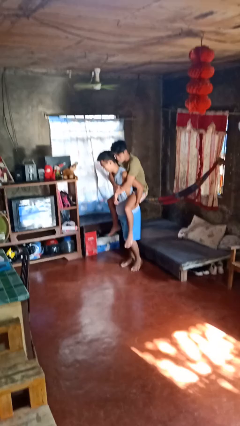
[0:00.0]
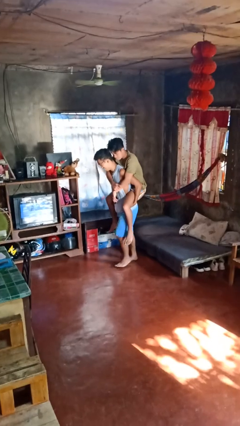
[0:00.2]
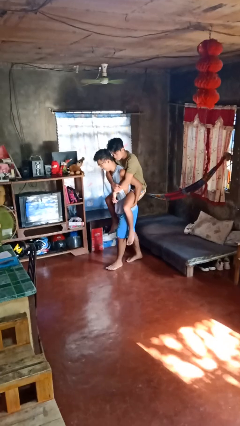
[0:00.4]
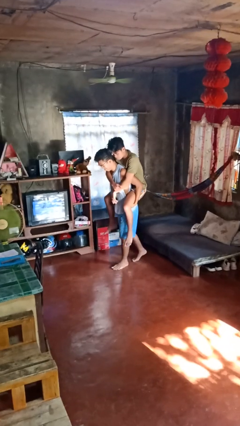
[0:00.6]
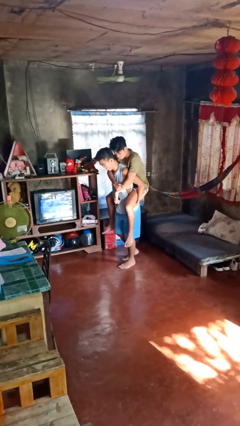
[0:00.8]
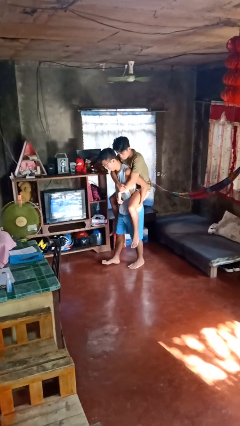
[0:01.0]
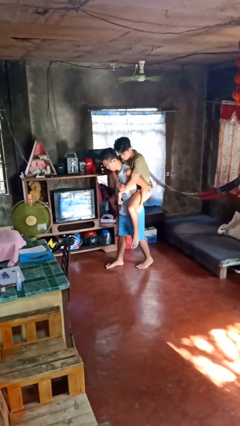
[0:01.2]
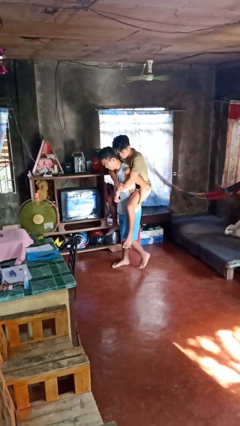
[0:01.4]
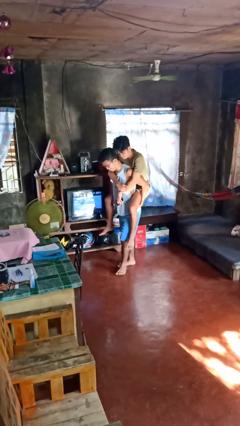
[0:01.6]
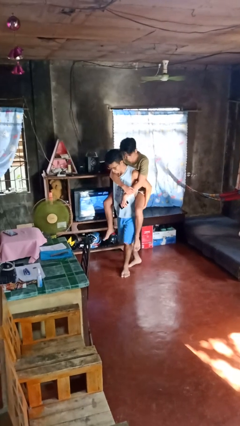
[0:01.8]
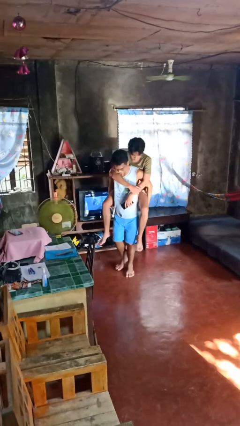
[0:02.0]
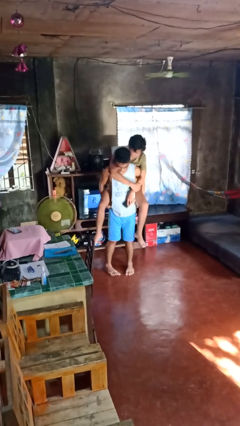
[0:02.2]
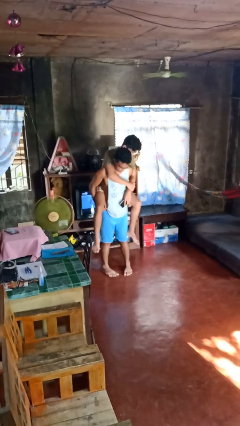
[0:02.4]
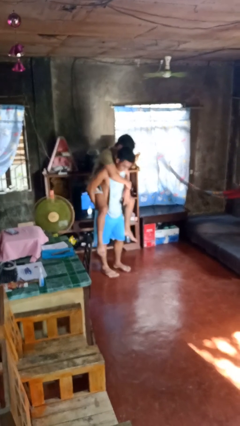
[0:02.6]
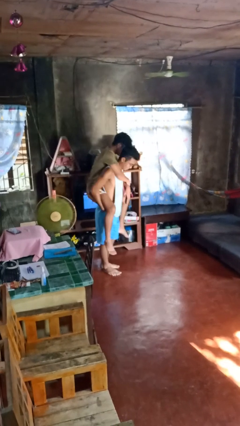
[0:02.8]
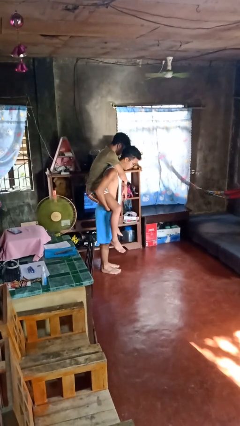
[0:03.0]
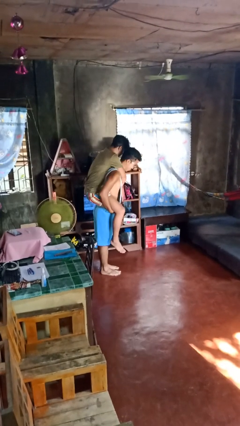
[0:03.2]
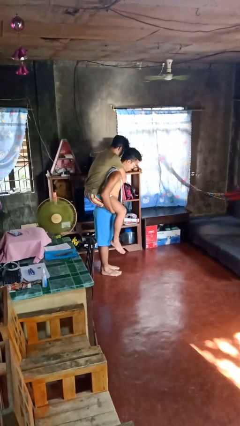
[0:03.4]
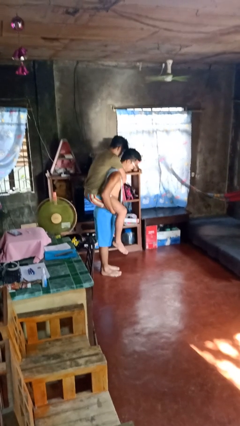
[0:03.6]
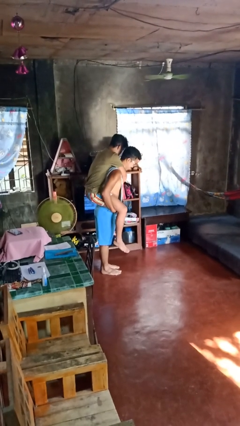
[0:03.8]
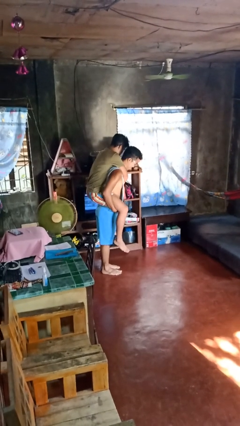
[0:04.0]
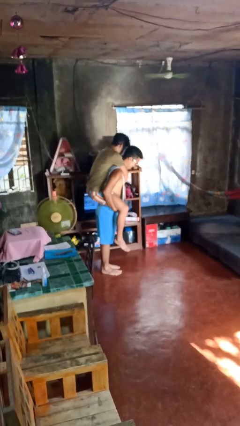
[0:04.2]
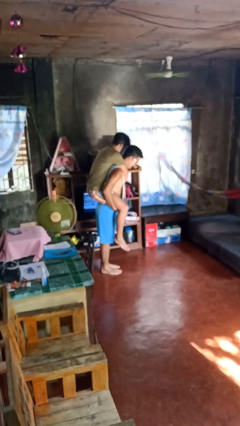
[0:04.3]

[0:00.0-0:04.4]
person carries person on back

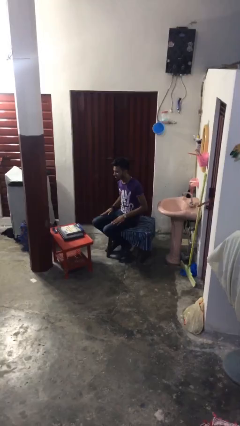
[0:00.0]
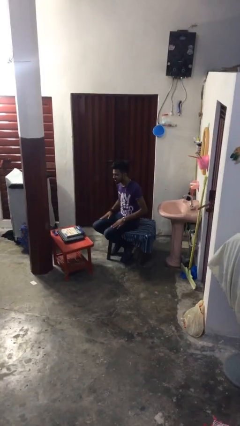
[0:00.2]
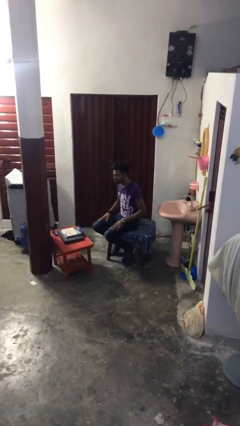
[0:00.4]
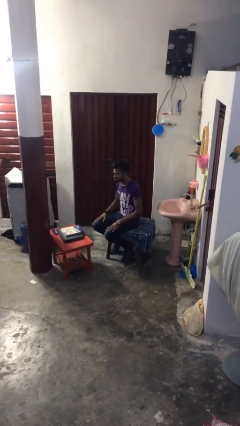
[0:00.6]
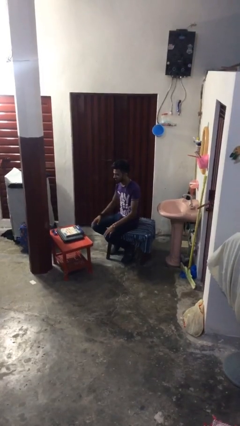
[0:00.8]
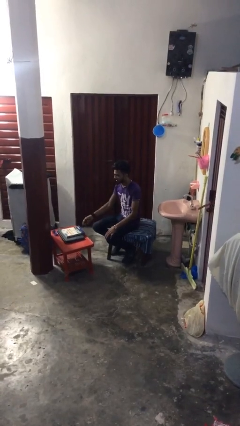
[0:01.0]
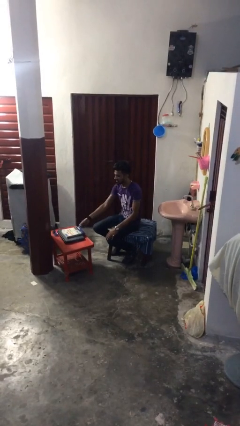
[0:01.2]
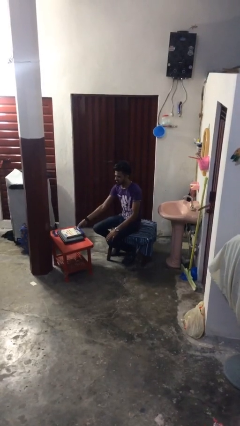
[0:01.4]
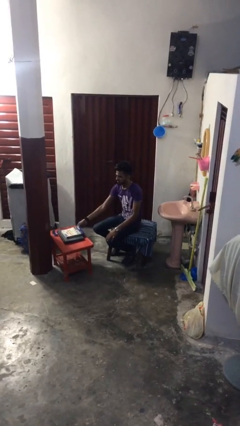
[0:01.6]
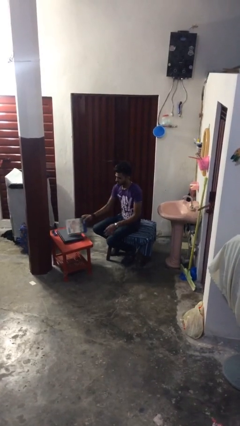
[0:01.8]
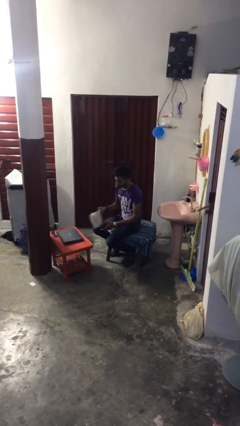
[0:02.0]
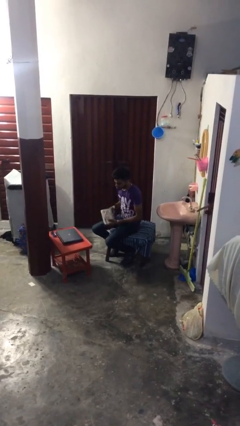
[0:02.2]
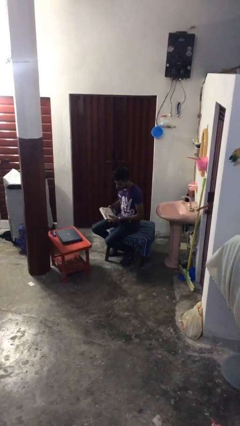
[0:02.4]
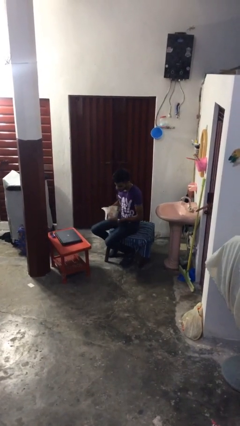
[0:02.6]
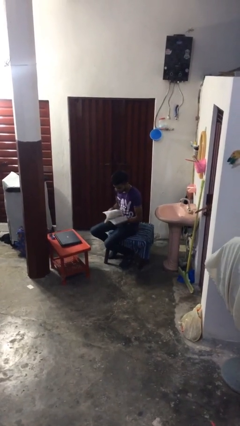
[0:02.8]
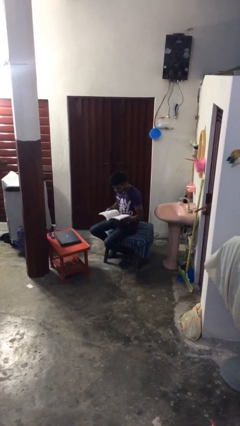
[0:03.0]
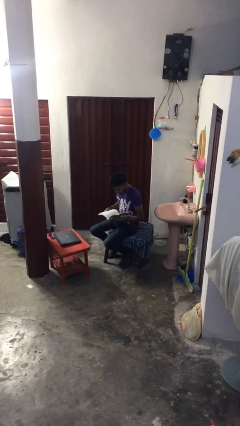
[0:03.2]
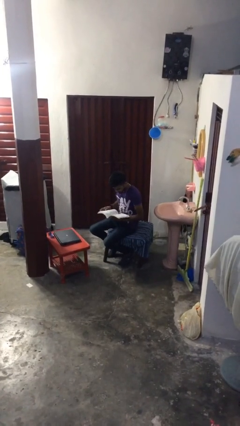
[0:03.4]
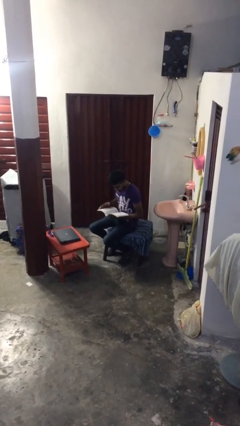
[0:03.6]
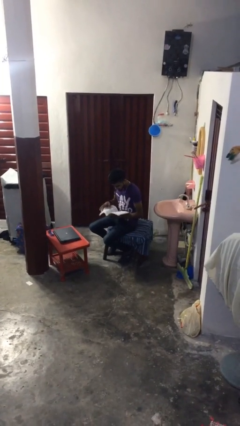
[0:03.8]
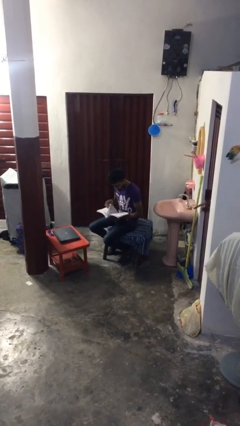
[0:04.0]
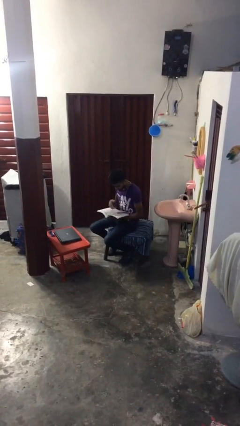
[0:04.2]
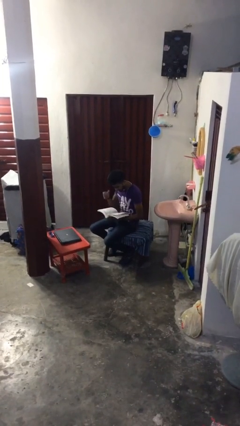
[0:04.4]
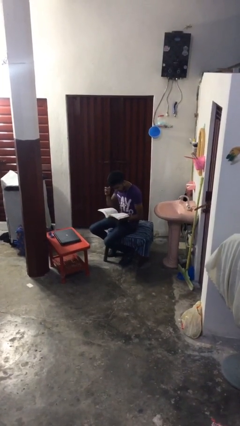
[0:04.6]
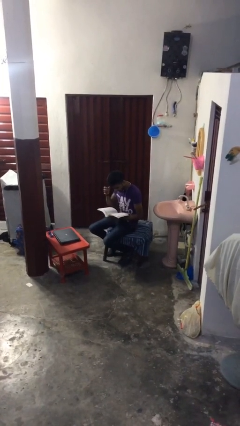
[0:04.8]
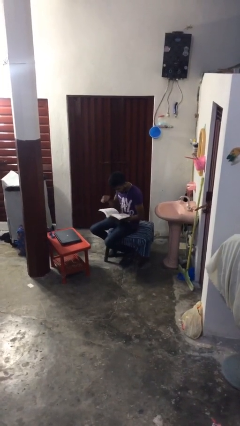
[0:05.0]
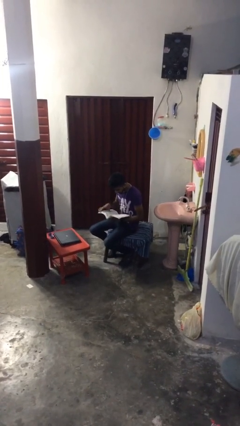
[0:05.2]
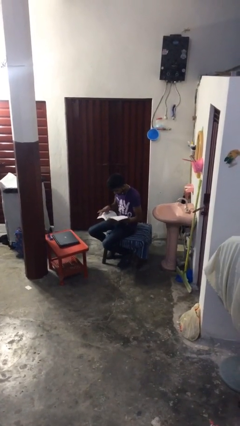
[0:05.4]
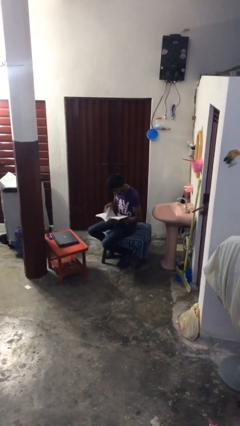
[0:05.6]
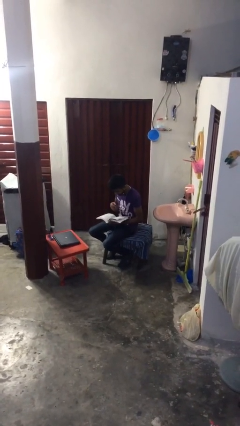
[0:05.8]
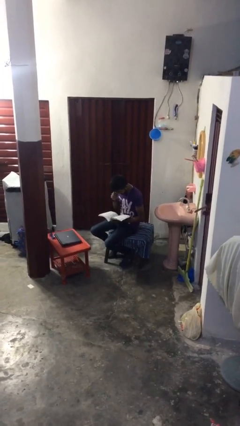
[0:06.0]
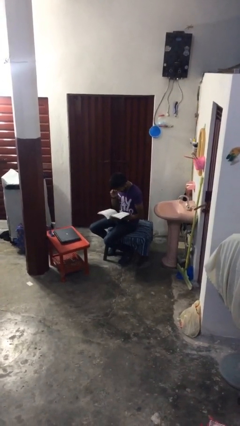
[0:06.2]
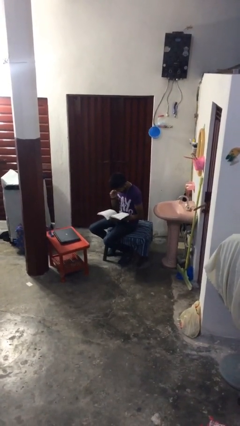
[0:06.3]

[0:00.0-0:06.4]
person reads document

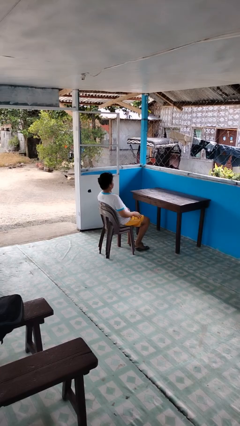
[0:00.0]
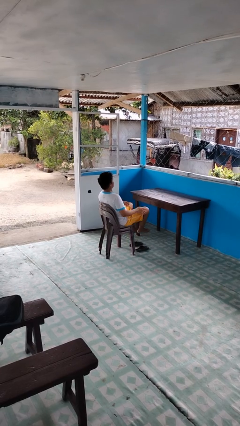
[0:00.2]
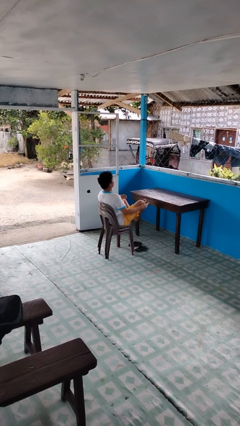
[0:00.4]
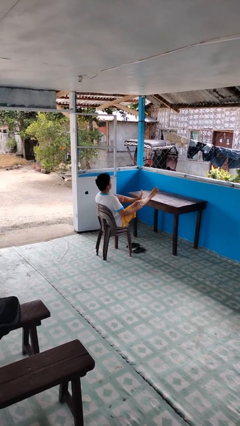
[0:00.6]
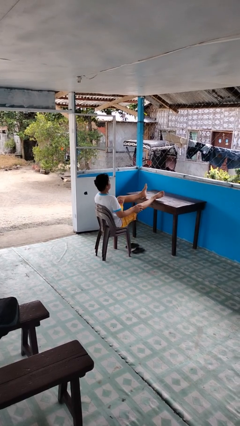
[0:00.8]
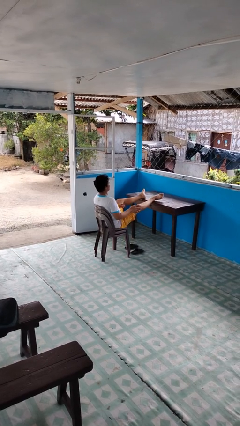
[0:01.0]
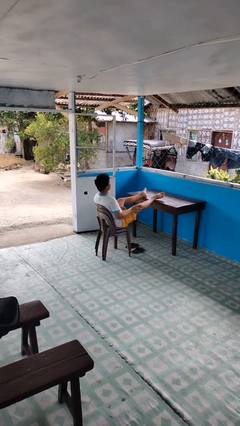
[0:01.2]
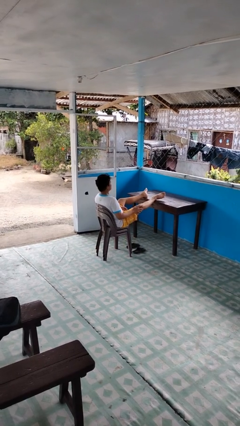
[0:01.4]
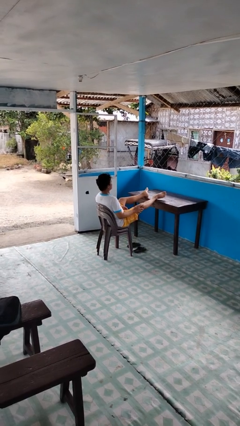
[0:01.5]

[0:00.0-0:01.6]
person puts feet up

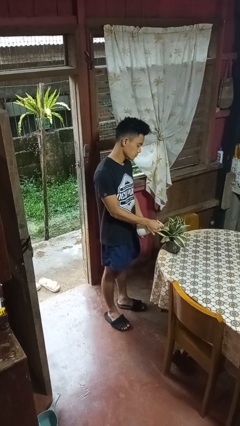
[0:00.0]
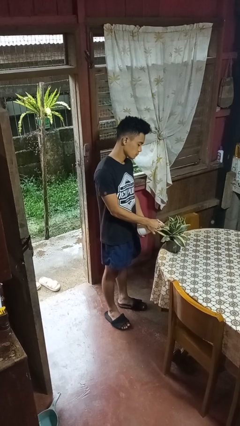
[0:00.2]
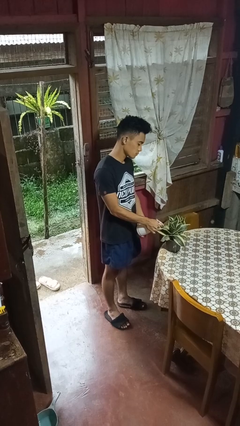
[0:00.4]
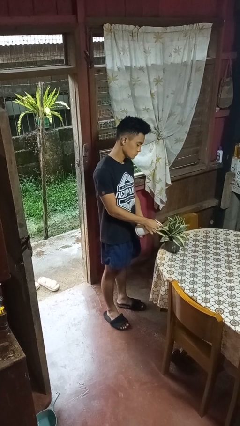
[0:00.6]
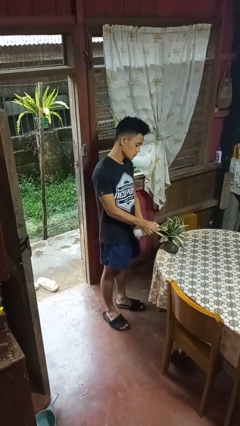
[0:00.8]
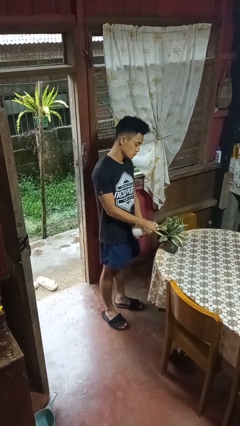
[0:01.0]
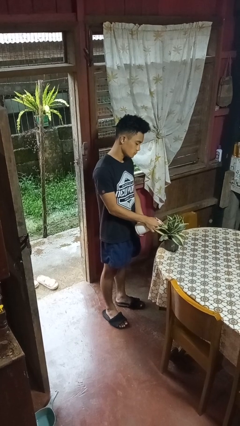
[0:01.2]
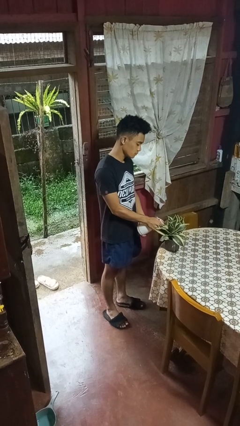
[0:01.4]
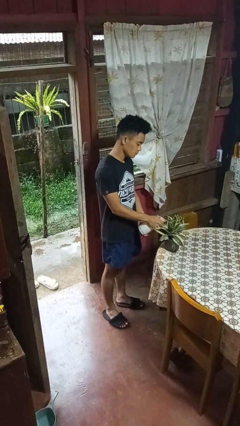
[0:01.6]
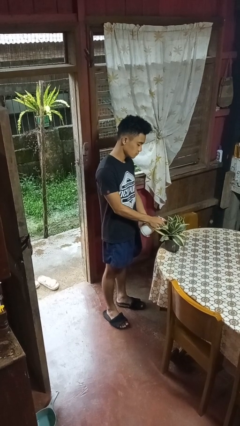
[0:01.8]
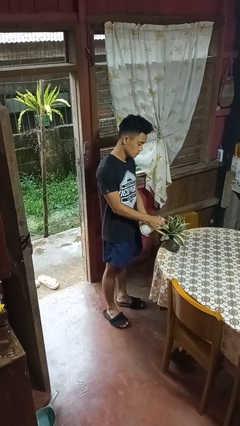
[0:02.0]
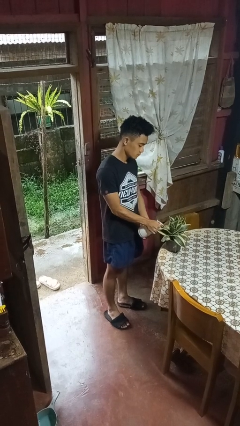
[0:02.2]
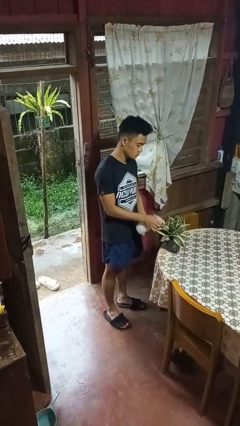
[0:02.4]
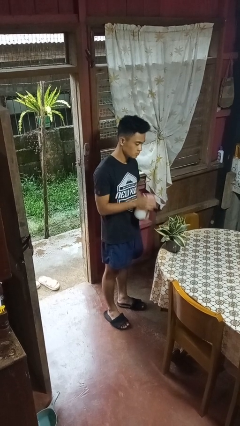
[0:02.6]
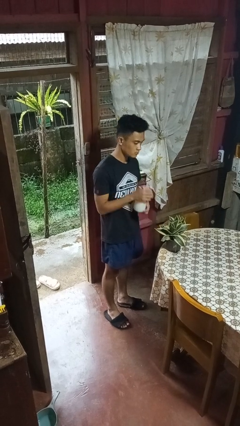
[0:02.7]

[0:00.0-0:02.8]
person waters houseplant

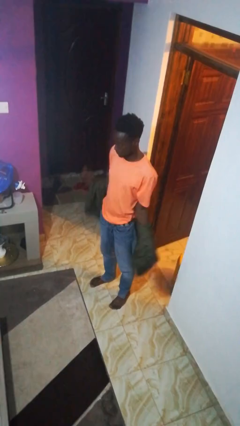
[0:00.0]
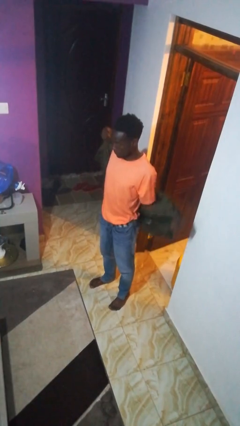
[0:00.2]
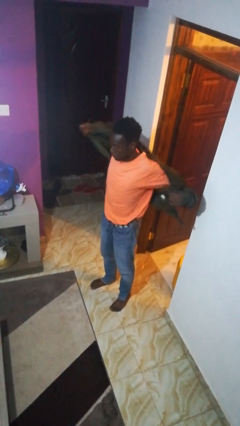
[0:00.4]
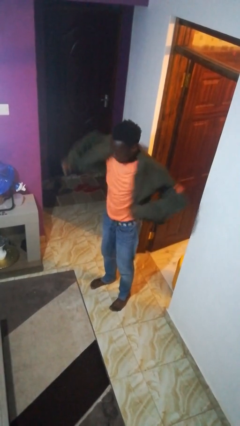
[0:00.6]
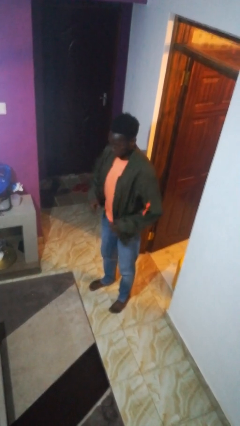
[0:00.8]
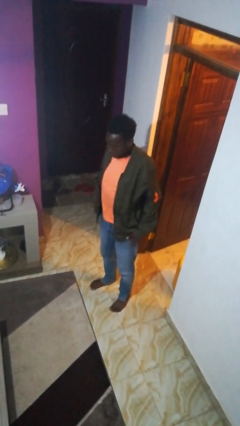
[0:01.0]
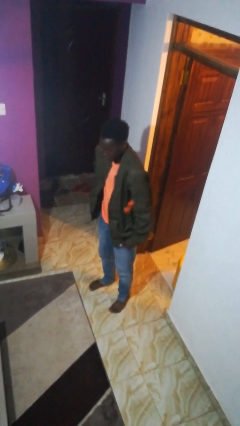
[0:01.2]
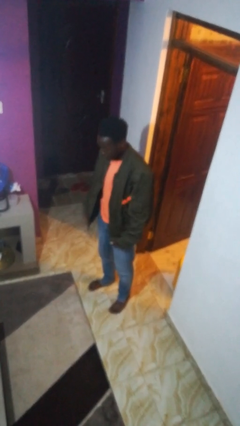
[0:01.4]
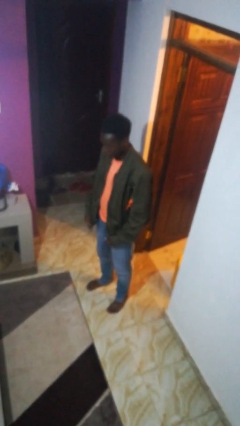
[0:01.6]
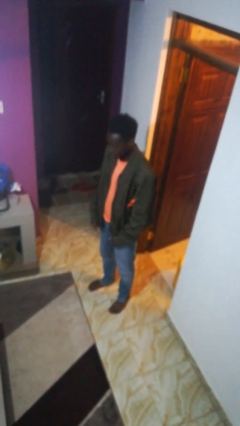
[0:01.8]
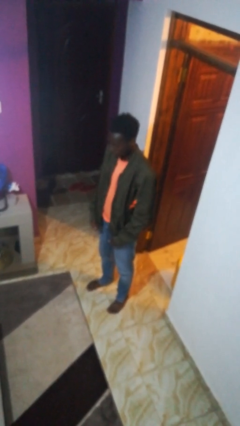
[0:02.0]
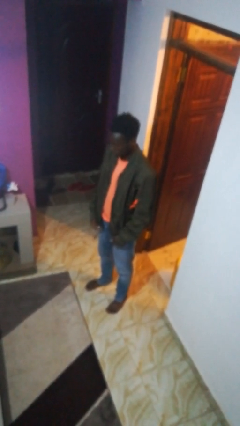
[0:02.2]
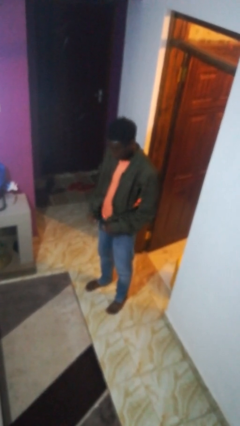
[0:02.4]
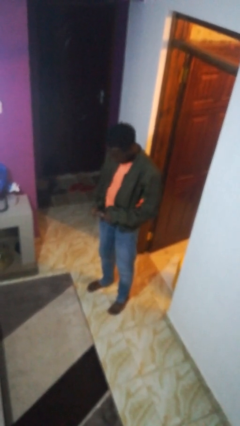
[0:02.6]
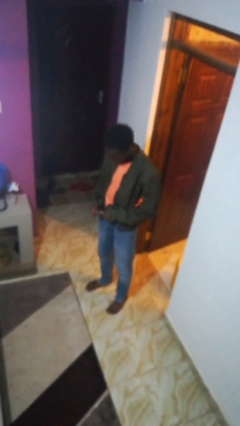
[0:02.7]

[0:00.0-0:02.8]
person puts on jacket
